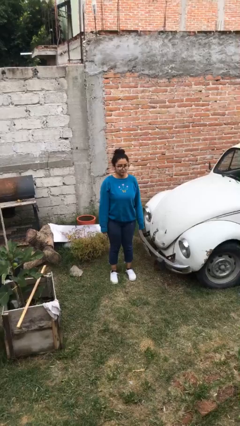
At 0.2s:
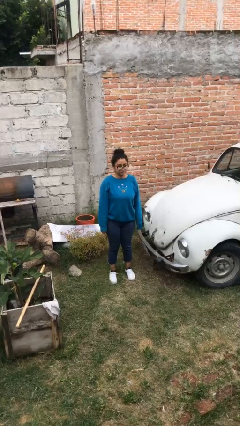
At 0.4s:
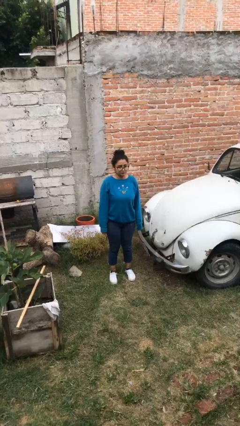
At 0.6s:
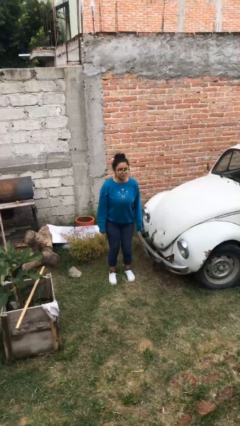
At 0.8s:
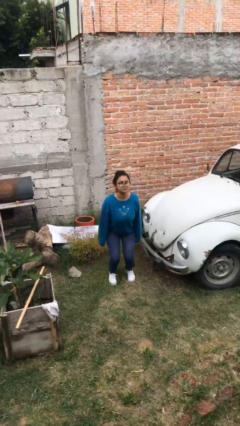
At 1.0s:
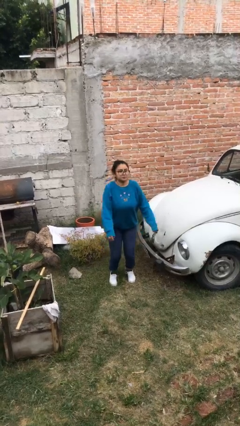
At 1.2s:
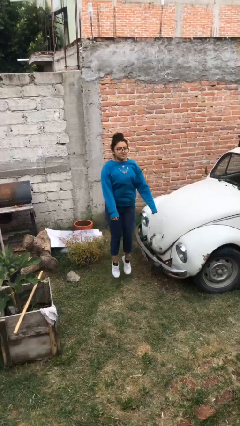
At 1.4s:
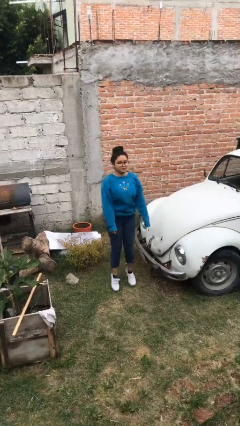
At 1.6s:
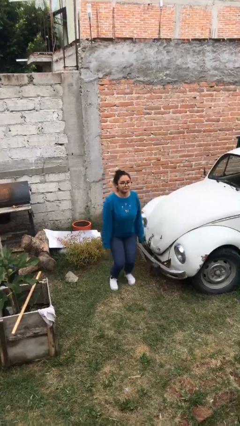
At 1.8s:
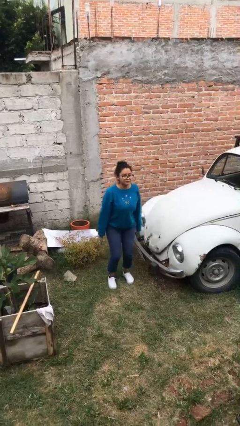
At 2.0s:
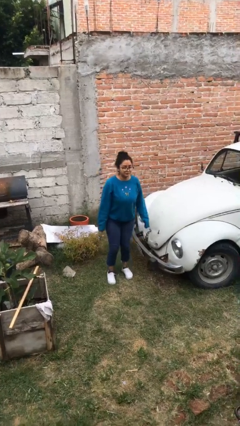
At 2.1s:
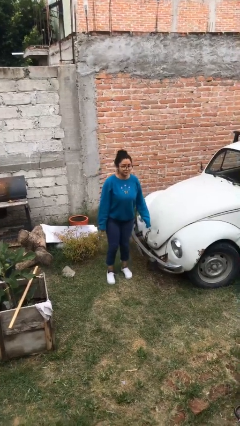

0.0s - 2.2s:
person jumps

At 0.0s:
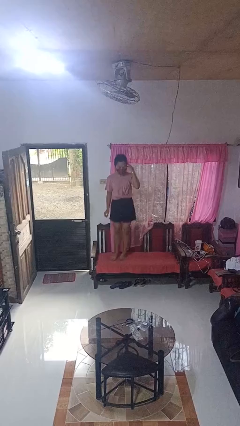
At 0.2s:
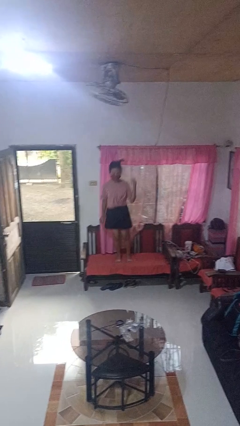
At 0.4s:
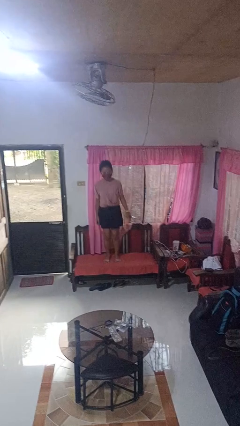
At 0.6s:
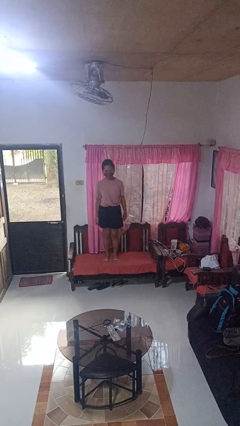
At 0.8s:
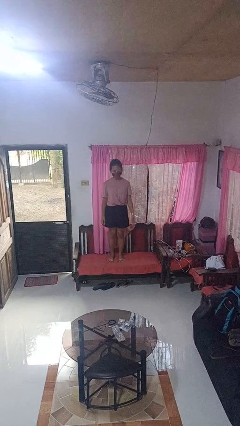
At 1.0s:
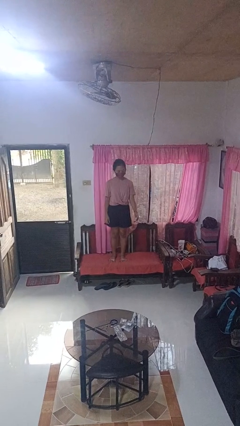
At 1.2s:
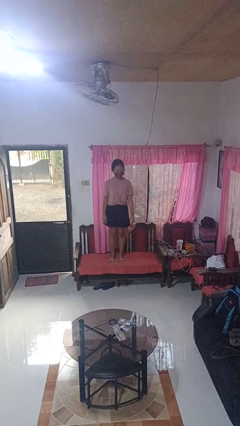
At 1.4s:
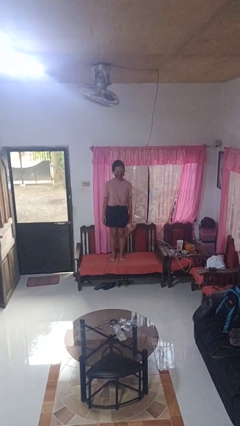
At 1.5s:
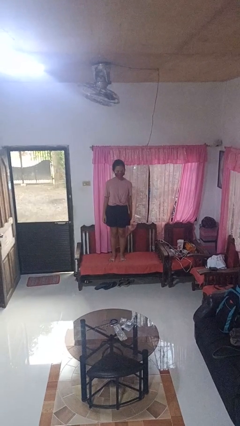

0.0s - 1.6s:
person jumps on couch

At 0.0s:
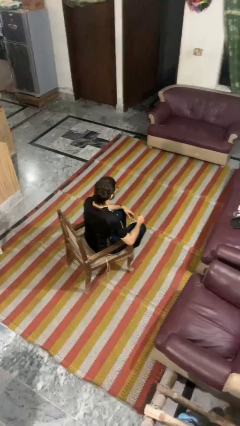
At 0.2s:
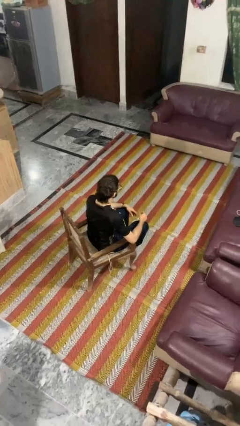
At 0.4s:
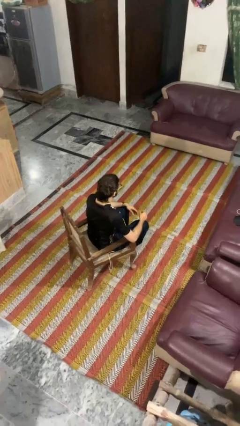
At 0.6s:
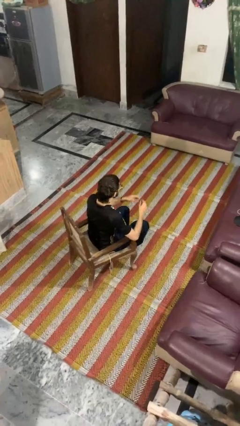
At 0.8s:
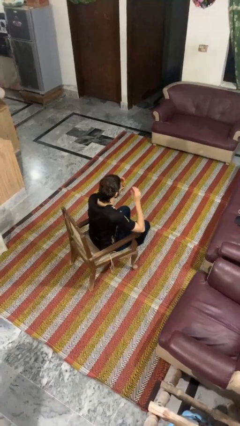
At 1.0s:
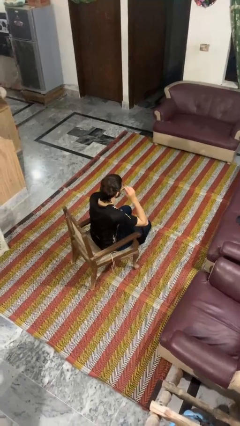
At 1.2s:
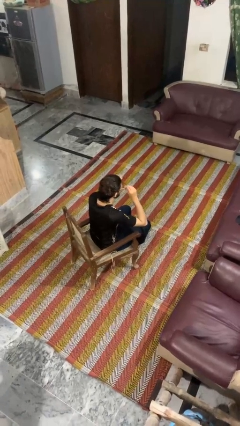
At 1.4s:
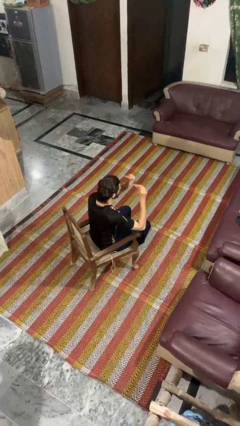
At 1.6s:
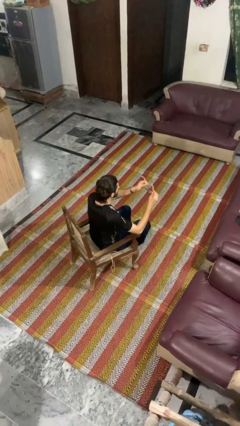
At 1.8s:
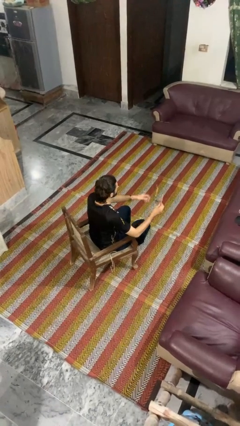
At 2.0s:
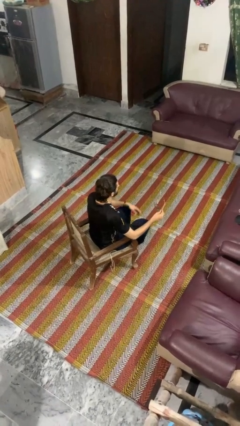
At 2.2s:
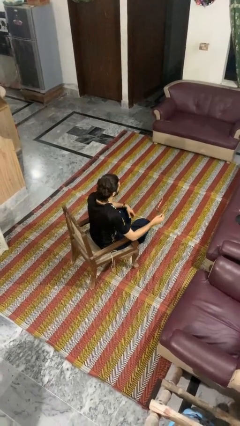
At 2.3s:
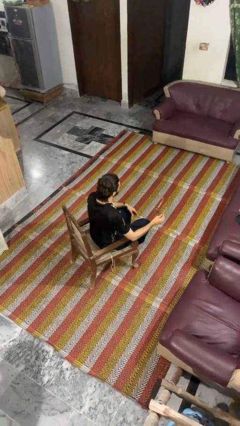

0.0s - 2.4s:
person takes off glasses

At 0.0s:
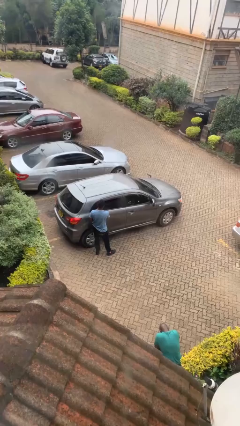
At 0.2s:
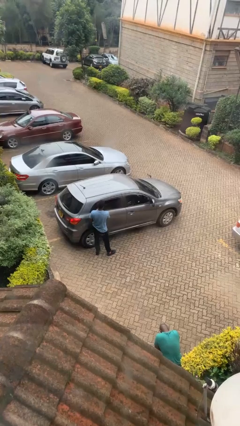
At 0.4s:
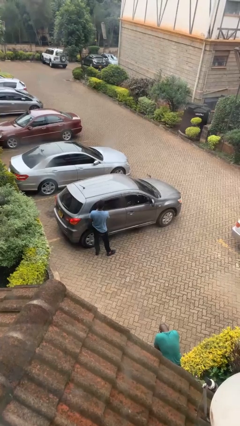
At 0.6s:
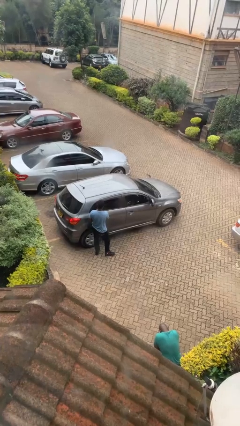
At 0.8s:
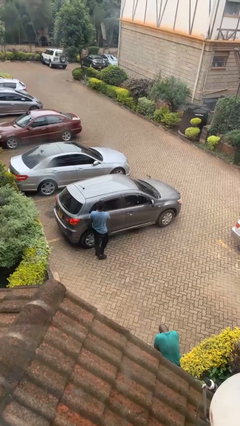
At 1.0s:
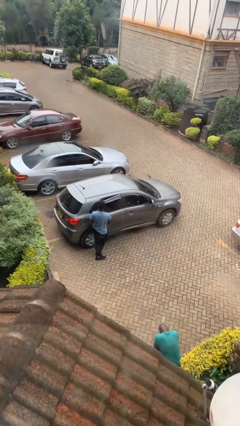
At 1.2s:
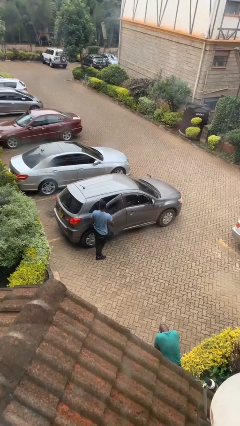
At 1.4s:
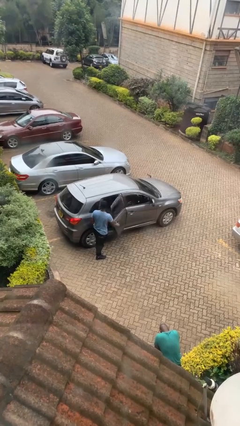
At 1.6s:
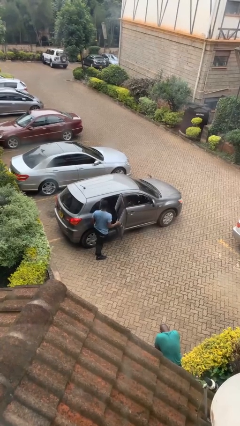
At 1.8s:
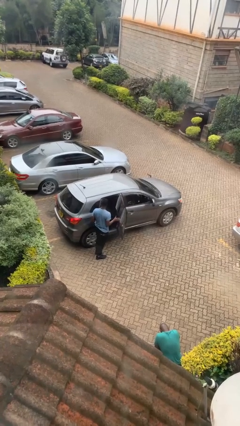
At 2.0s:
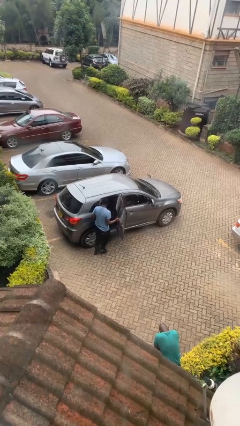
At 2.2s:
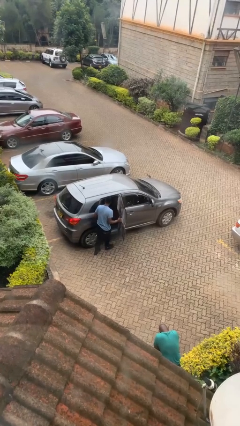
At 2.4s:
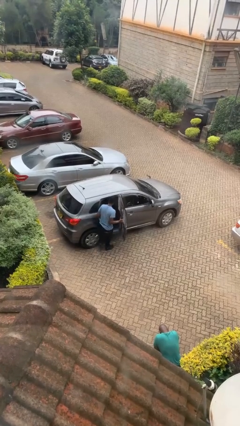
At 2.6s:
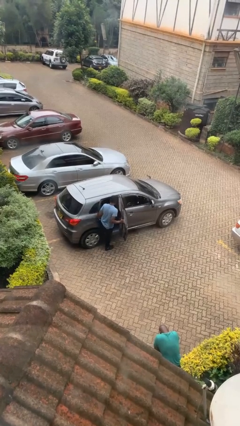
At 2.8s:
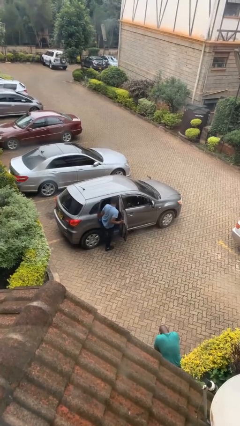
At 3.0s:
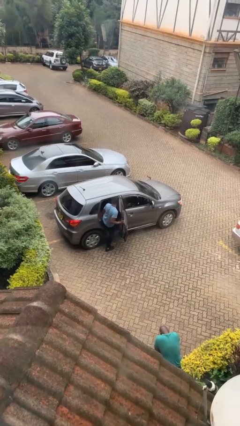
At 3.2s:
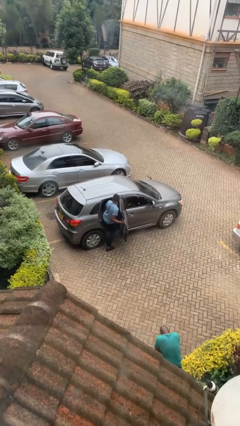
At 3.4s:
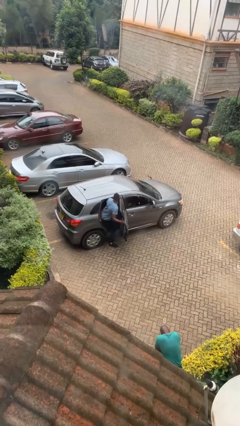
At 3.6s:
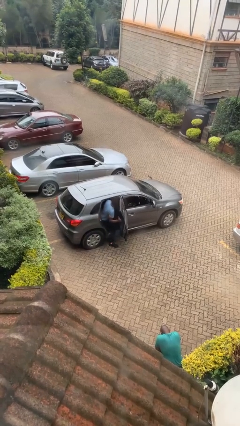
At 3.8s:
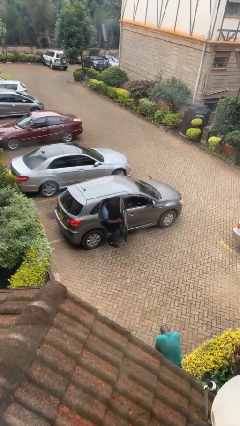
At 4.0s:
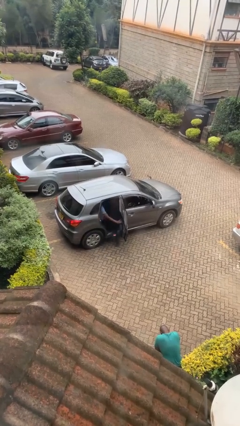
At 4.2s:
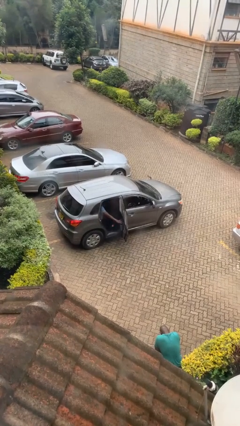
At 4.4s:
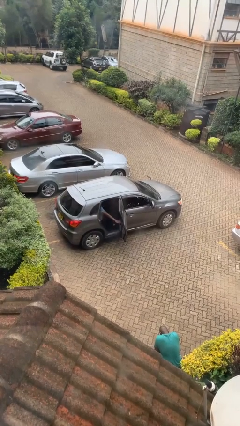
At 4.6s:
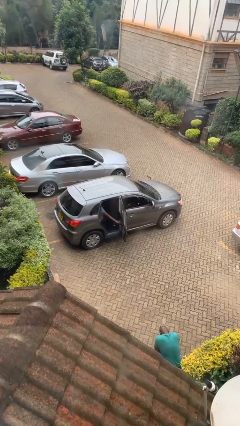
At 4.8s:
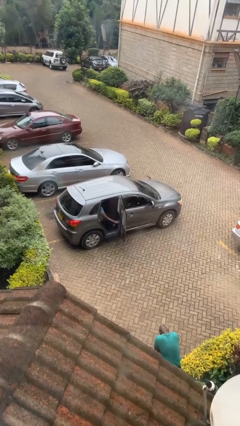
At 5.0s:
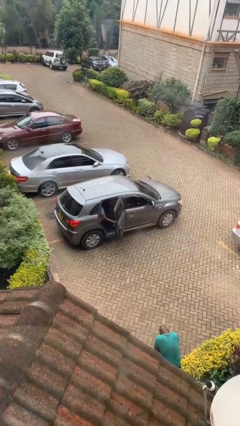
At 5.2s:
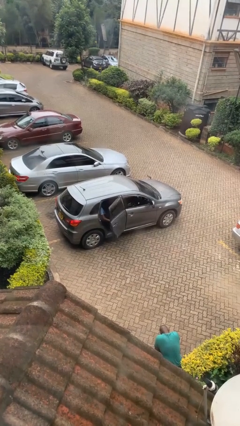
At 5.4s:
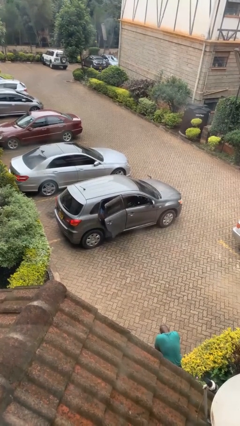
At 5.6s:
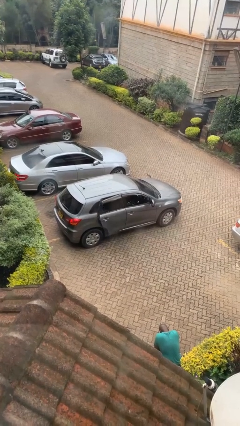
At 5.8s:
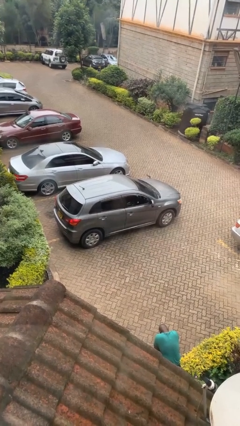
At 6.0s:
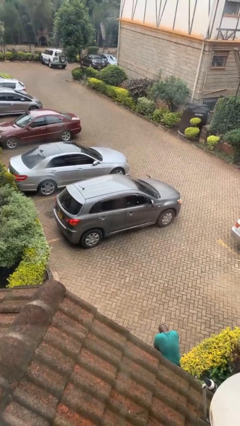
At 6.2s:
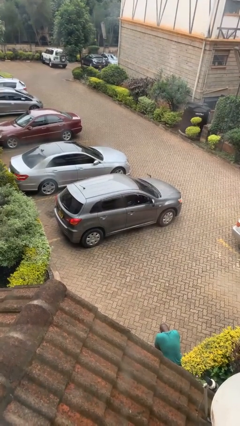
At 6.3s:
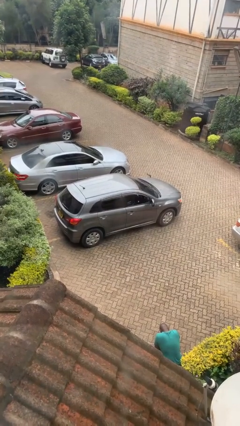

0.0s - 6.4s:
car picks up person

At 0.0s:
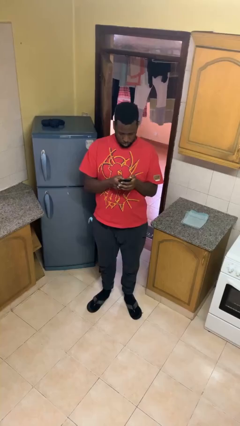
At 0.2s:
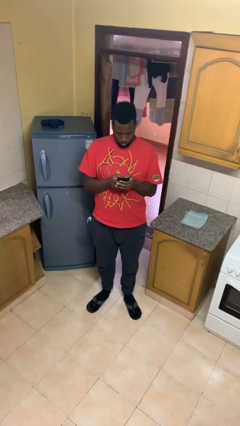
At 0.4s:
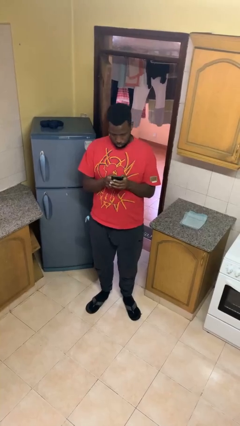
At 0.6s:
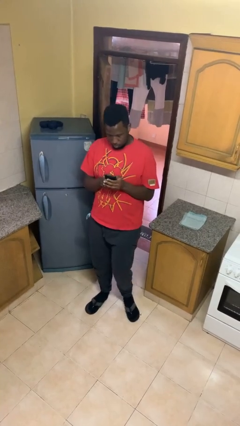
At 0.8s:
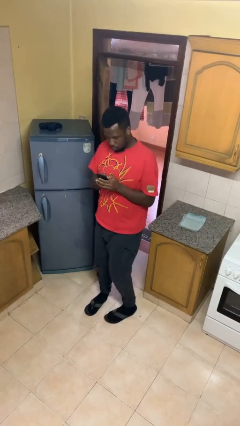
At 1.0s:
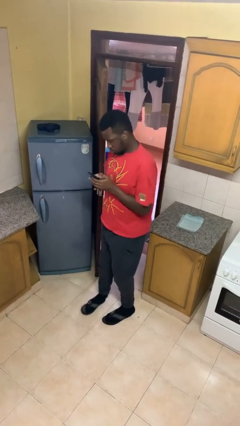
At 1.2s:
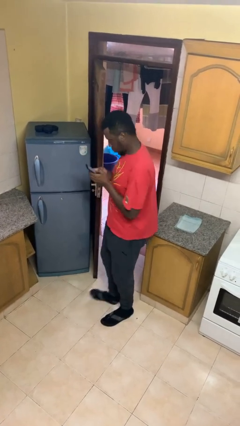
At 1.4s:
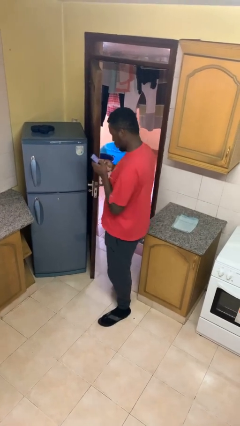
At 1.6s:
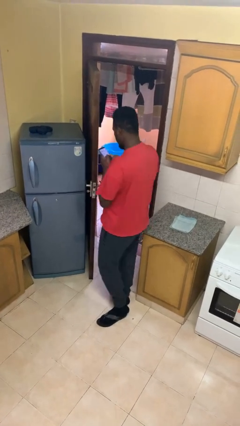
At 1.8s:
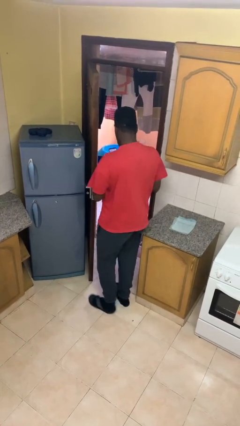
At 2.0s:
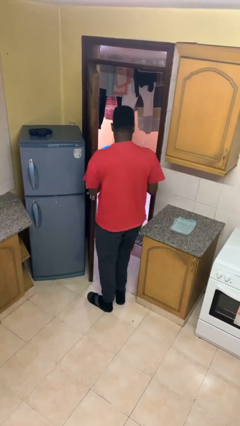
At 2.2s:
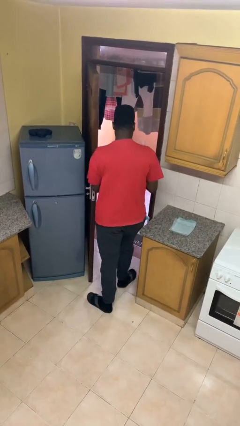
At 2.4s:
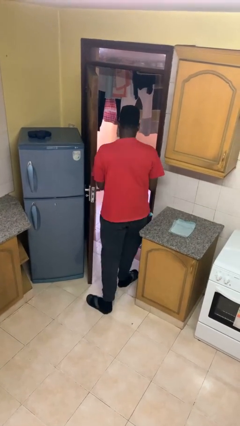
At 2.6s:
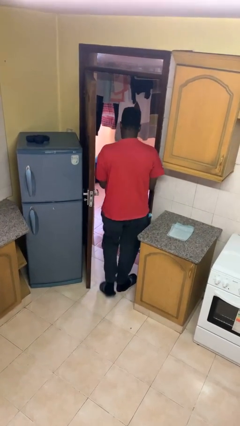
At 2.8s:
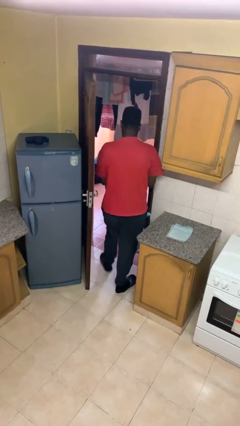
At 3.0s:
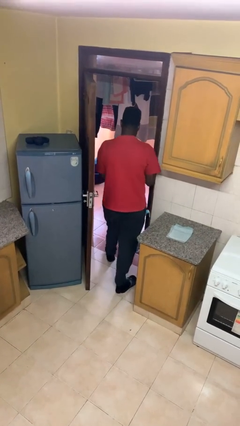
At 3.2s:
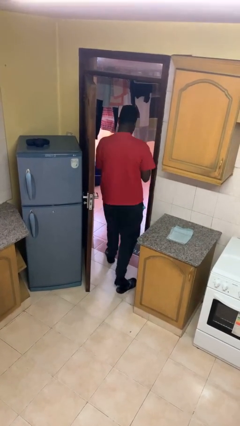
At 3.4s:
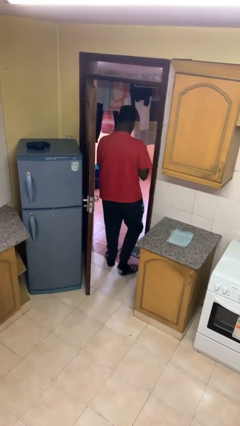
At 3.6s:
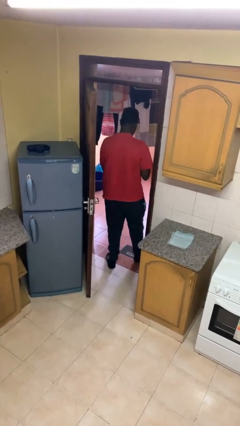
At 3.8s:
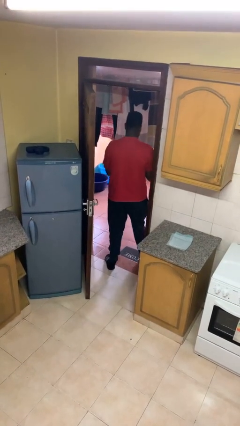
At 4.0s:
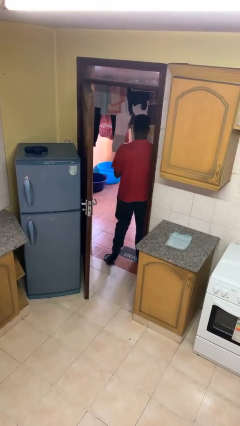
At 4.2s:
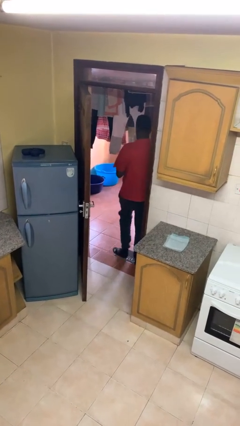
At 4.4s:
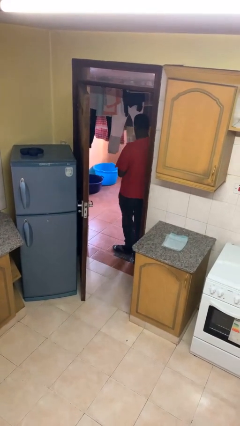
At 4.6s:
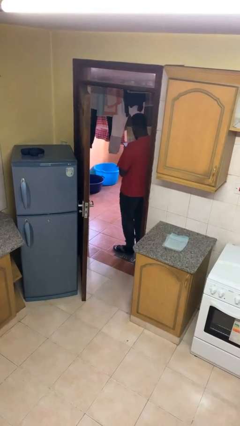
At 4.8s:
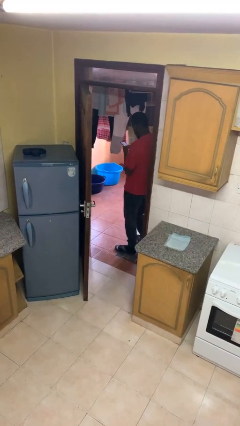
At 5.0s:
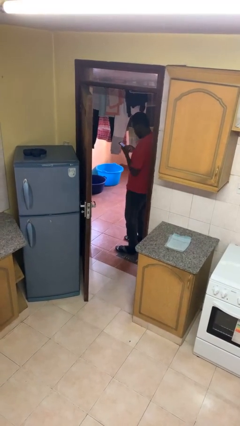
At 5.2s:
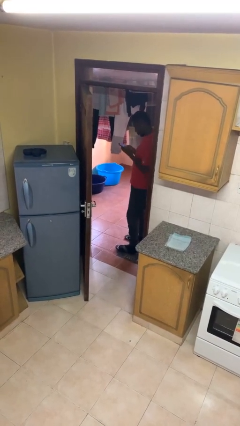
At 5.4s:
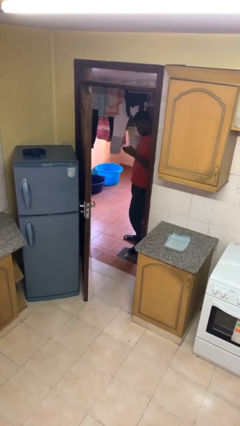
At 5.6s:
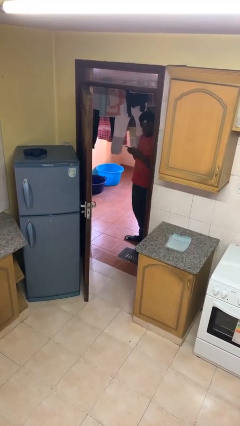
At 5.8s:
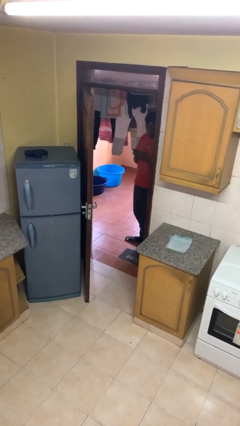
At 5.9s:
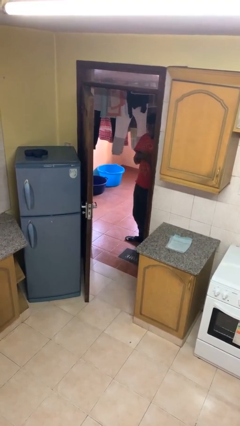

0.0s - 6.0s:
person exits scene through structure
